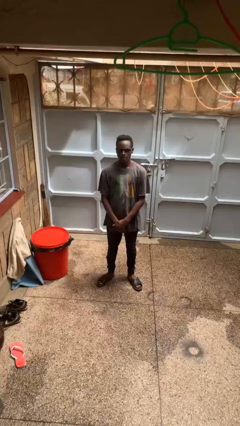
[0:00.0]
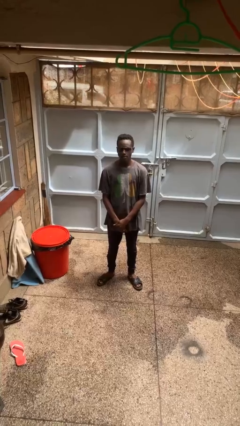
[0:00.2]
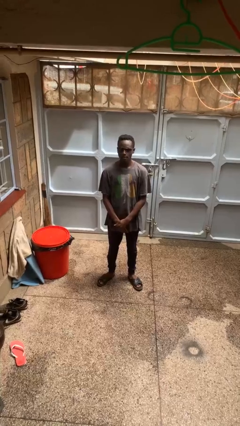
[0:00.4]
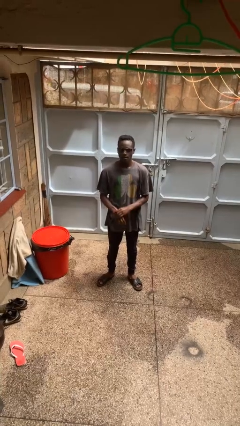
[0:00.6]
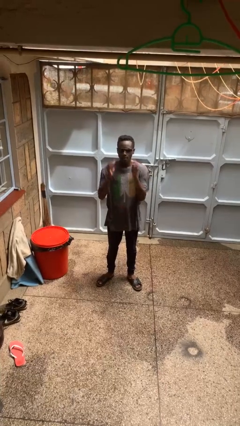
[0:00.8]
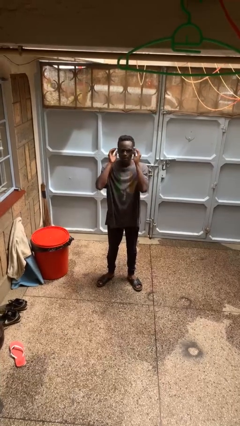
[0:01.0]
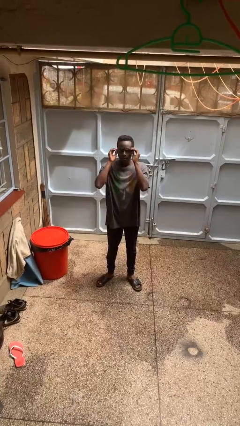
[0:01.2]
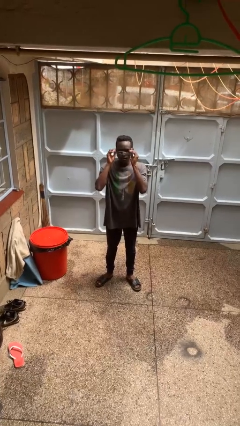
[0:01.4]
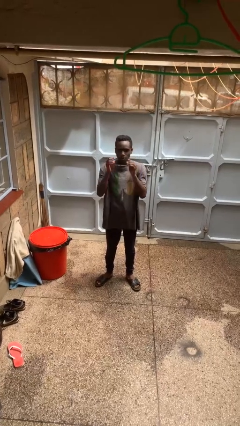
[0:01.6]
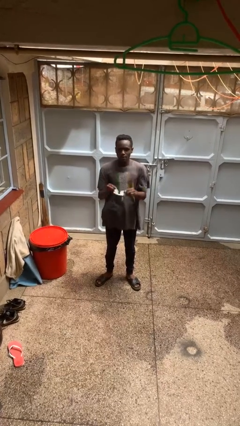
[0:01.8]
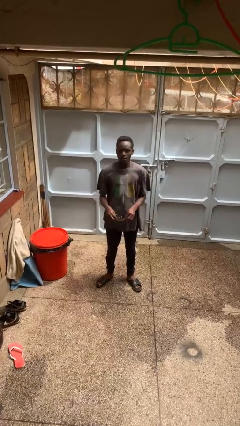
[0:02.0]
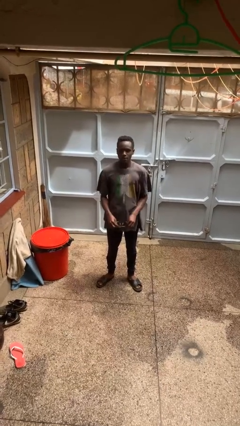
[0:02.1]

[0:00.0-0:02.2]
person takes off sunglasses

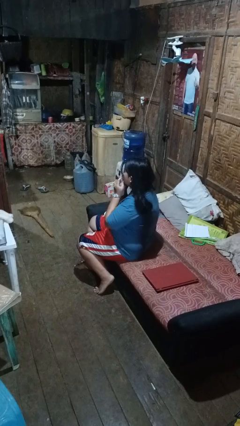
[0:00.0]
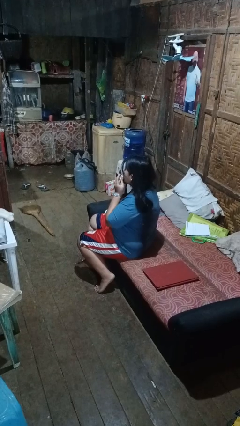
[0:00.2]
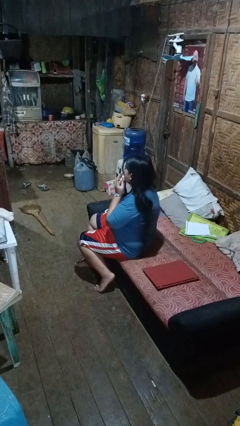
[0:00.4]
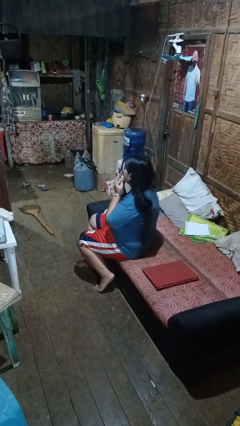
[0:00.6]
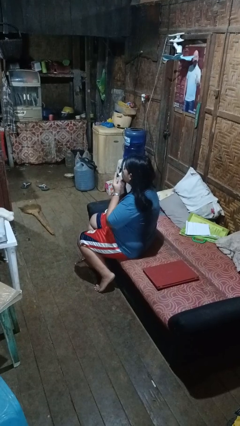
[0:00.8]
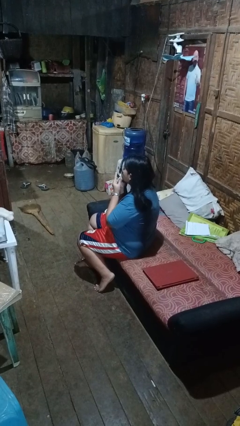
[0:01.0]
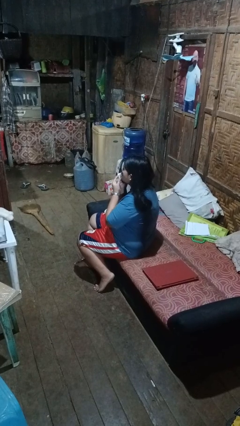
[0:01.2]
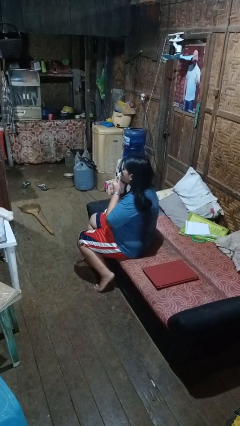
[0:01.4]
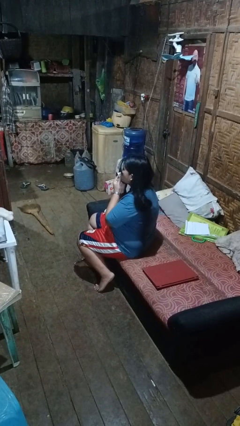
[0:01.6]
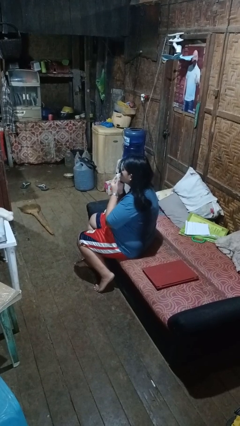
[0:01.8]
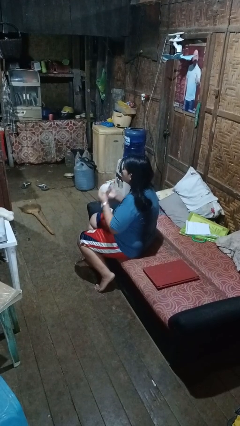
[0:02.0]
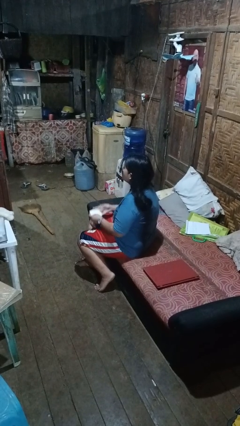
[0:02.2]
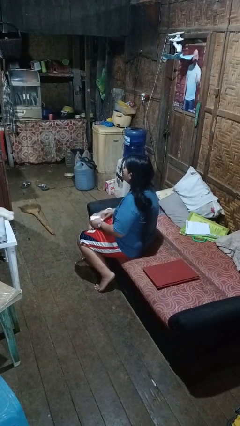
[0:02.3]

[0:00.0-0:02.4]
person wipes mouth with napkin

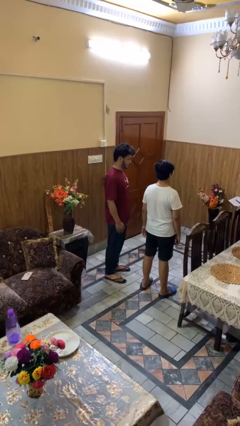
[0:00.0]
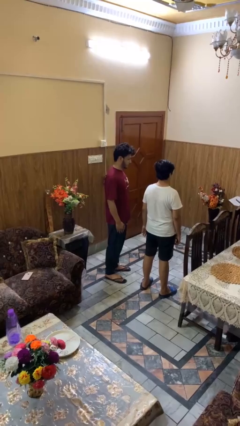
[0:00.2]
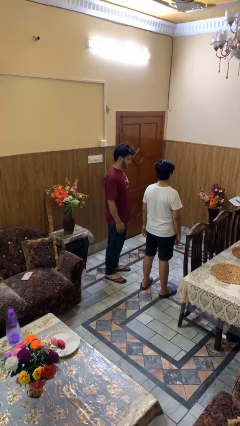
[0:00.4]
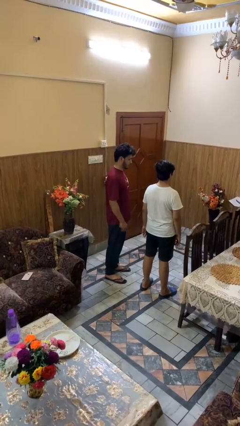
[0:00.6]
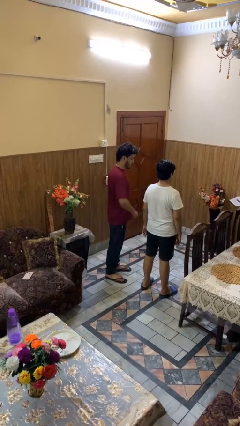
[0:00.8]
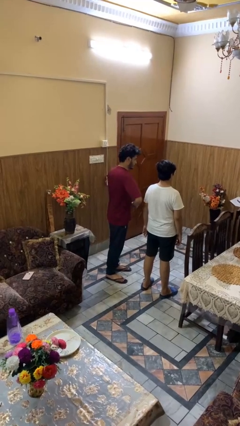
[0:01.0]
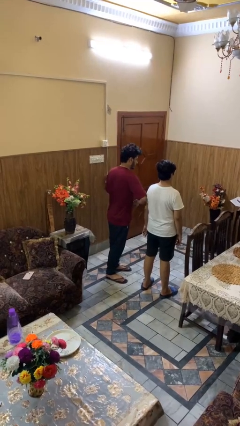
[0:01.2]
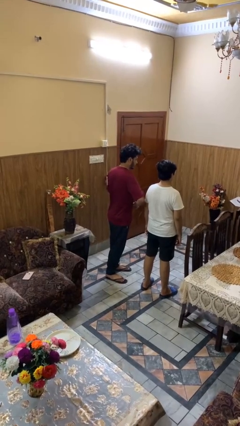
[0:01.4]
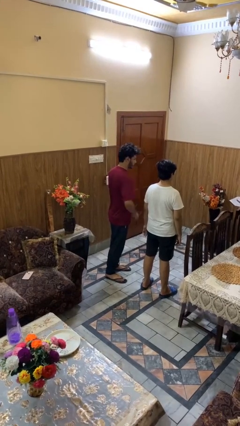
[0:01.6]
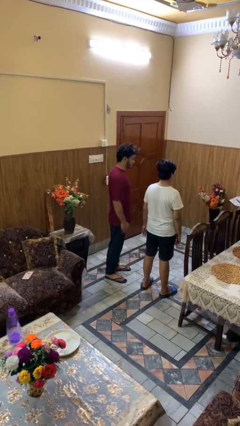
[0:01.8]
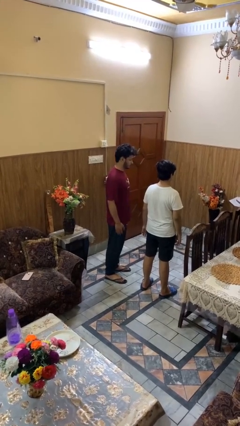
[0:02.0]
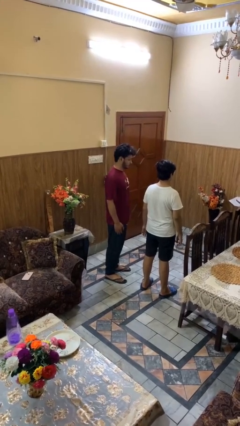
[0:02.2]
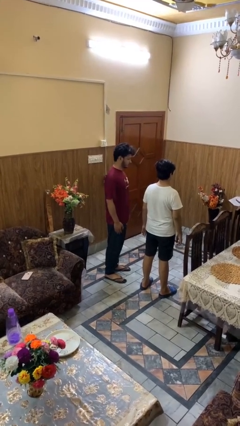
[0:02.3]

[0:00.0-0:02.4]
person nudges person with elbow

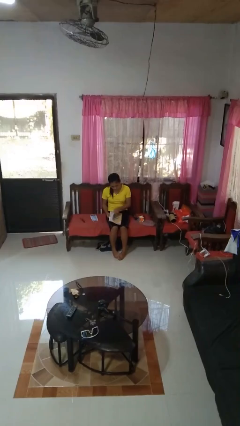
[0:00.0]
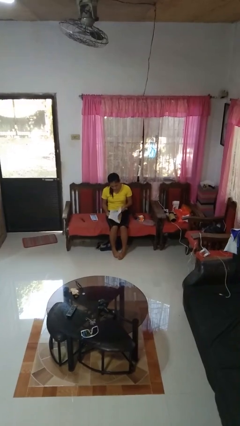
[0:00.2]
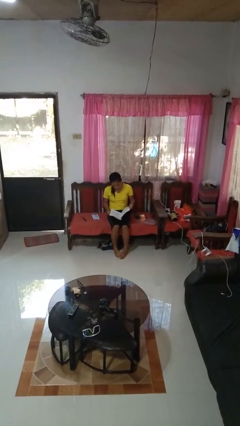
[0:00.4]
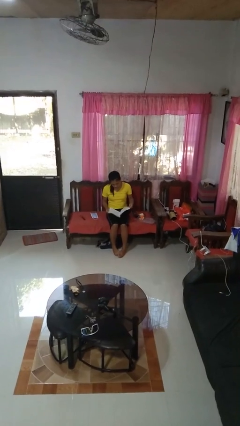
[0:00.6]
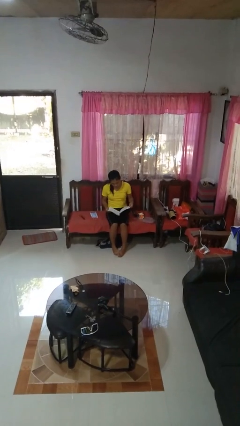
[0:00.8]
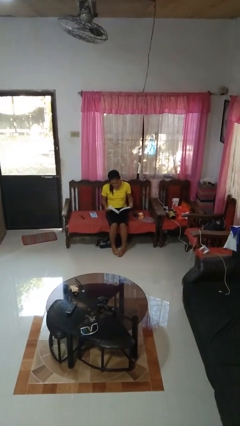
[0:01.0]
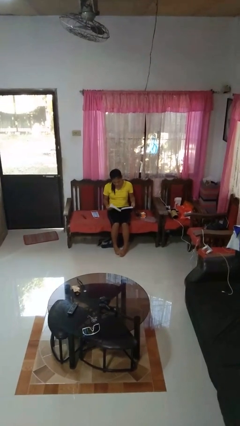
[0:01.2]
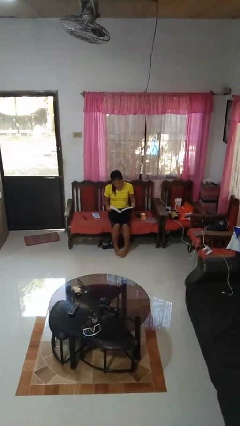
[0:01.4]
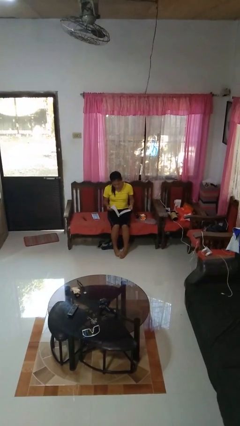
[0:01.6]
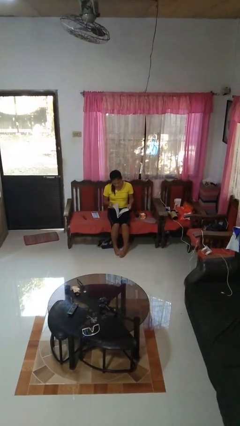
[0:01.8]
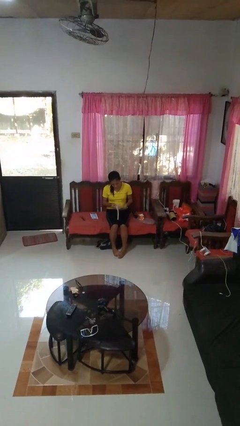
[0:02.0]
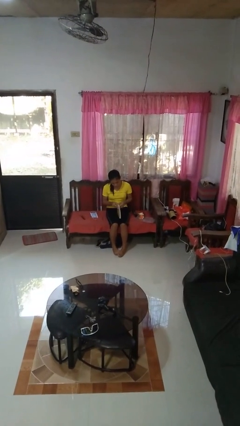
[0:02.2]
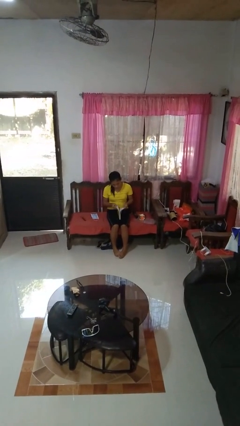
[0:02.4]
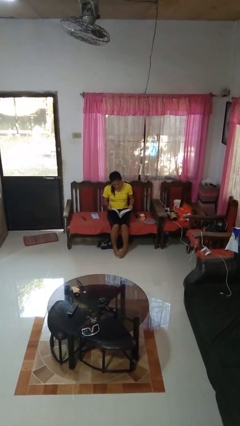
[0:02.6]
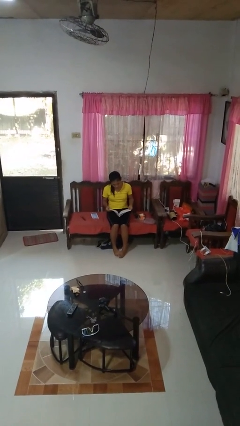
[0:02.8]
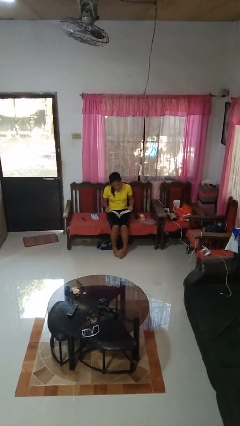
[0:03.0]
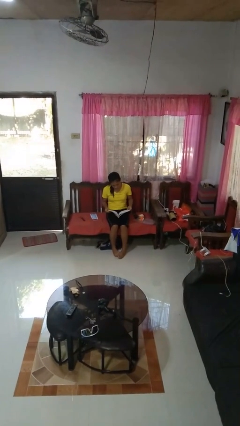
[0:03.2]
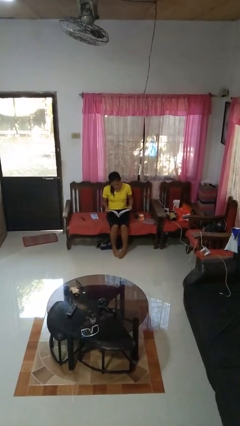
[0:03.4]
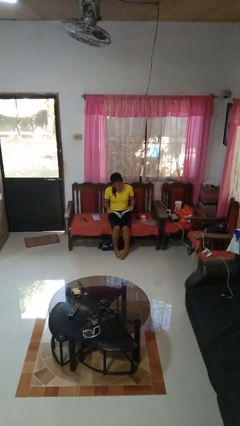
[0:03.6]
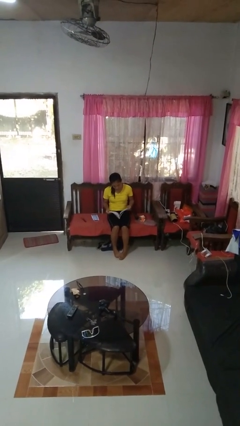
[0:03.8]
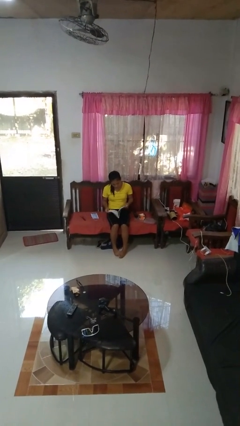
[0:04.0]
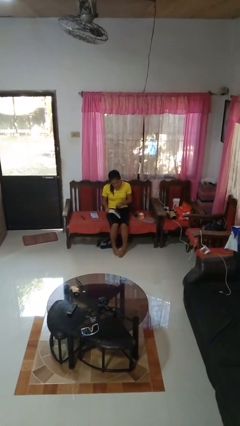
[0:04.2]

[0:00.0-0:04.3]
person reads book

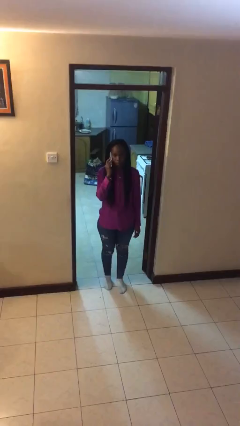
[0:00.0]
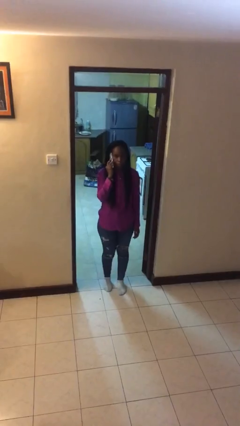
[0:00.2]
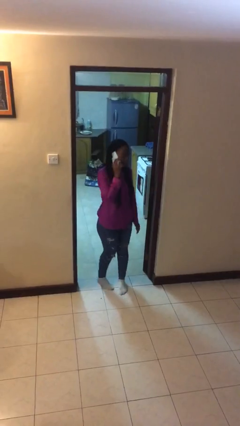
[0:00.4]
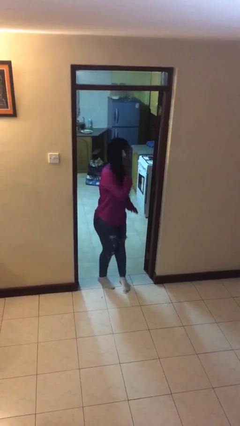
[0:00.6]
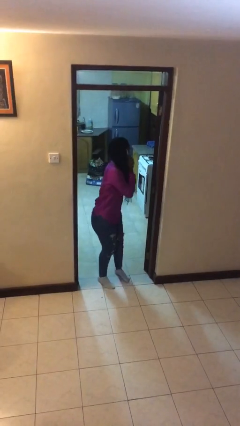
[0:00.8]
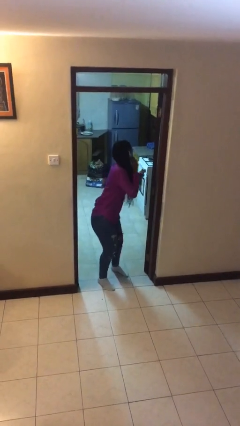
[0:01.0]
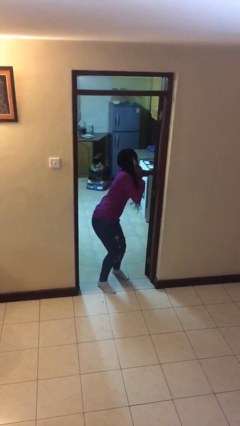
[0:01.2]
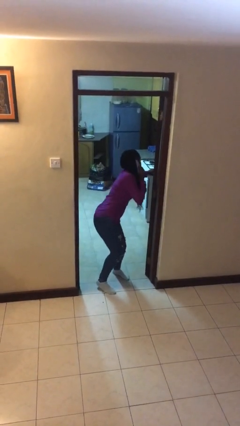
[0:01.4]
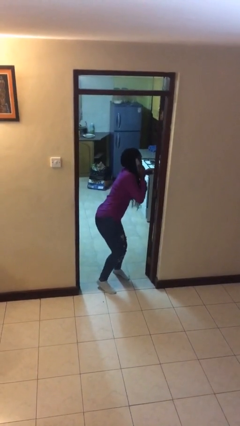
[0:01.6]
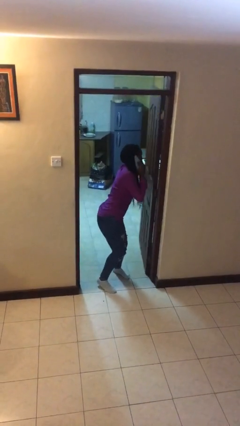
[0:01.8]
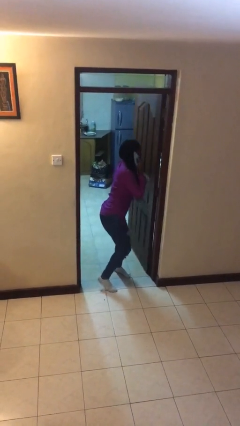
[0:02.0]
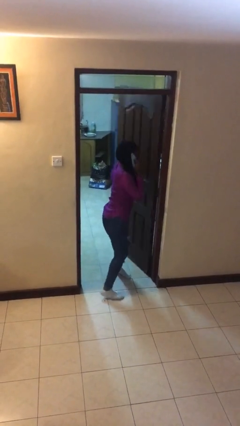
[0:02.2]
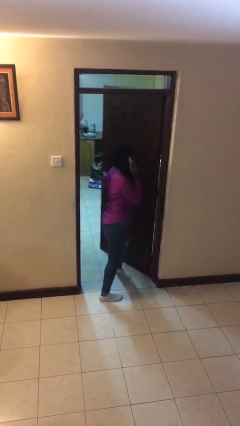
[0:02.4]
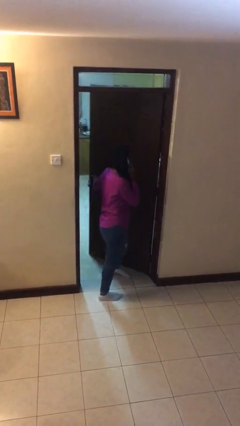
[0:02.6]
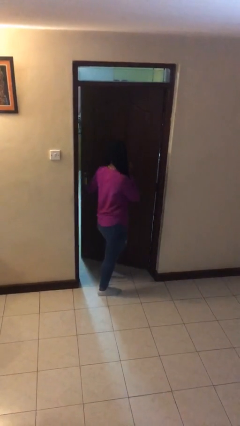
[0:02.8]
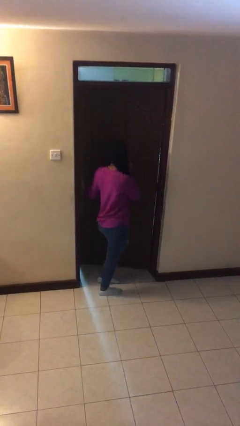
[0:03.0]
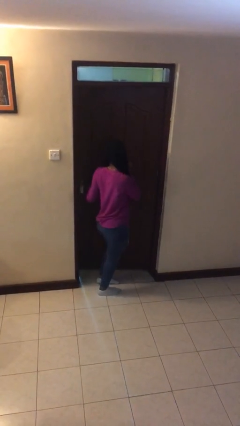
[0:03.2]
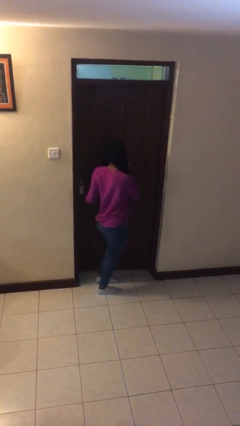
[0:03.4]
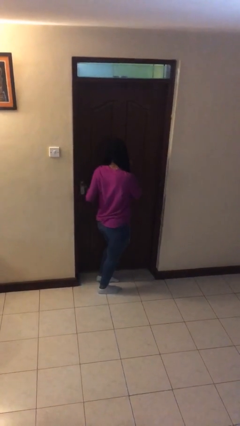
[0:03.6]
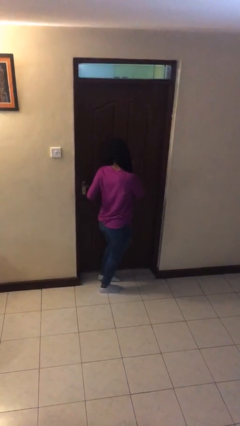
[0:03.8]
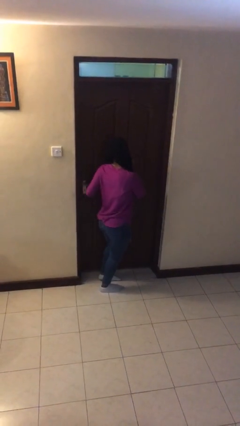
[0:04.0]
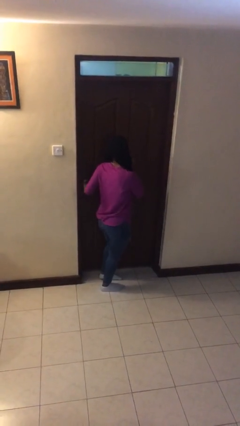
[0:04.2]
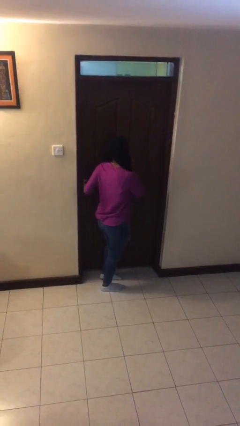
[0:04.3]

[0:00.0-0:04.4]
person closes facility door

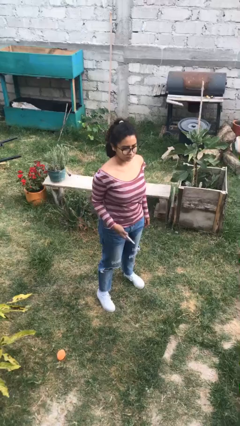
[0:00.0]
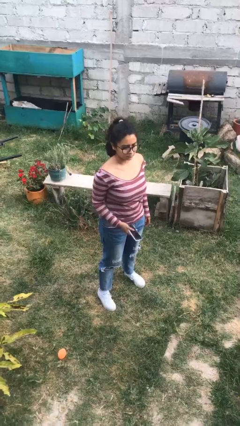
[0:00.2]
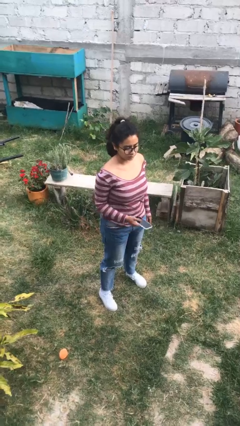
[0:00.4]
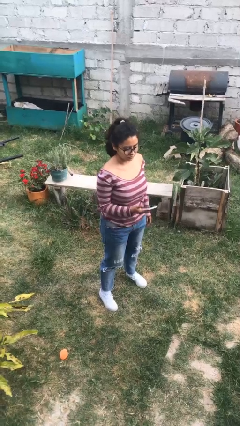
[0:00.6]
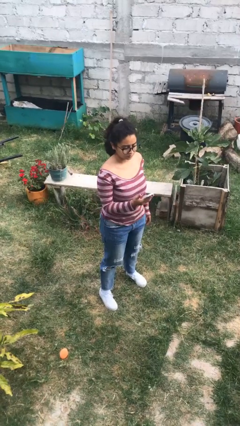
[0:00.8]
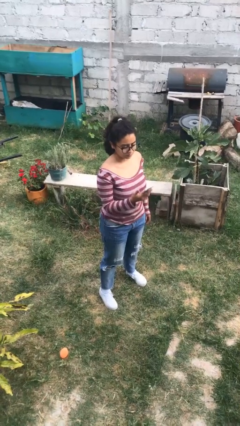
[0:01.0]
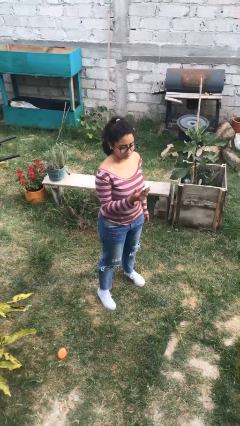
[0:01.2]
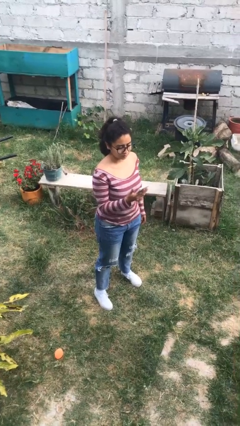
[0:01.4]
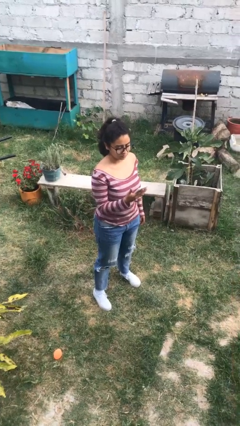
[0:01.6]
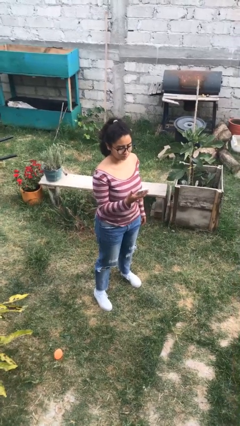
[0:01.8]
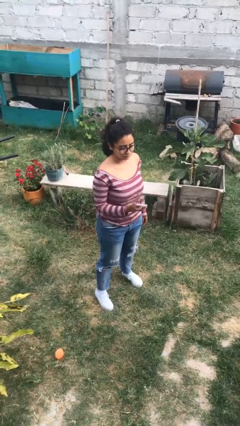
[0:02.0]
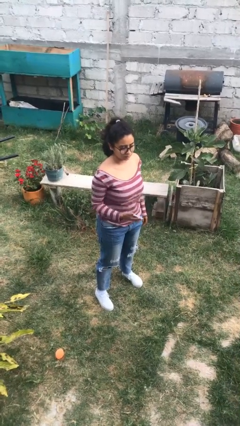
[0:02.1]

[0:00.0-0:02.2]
person puts phone into pocket
